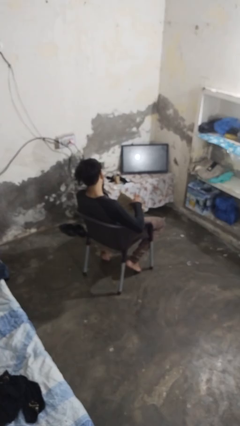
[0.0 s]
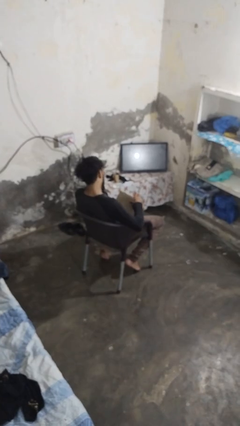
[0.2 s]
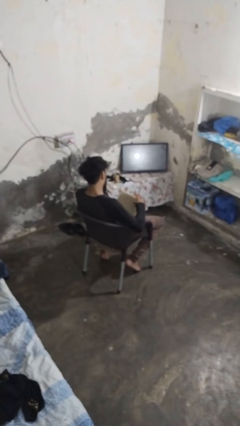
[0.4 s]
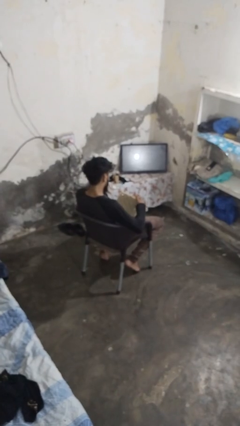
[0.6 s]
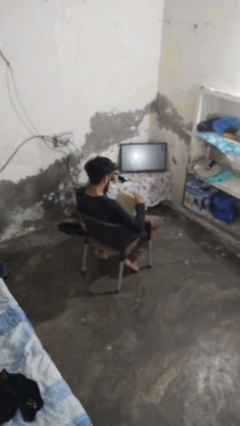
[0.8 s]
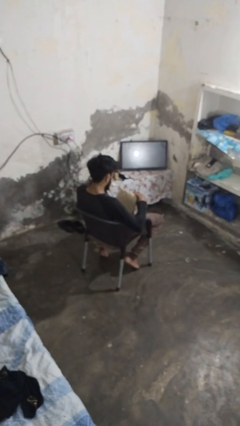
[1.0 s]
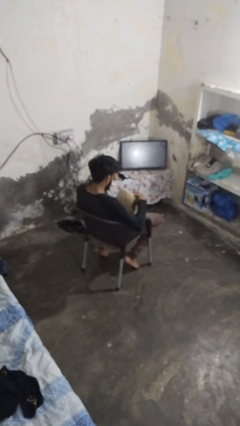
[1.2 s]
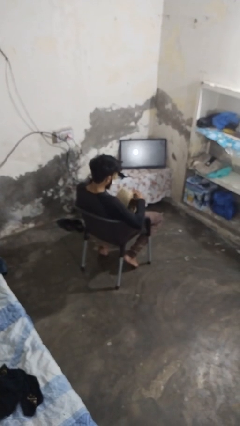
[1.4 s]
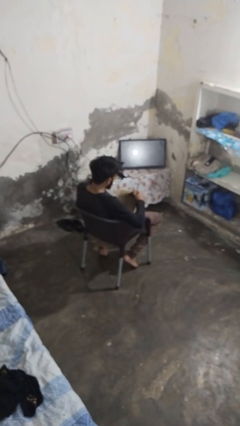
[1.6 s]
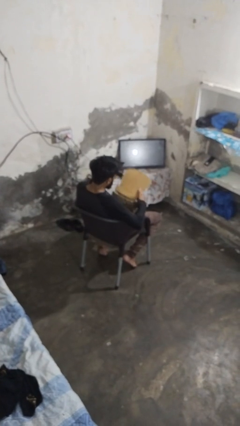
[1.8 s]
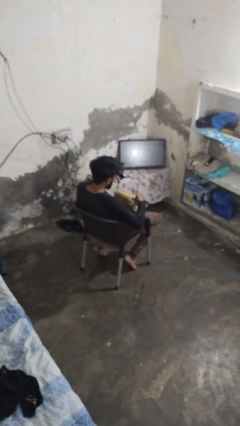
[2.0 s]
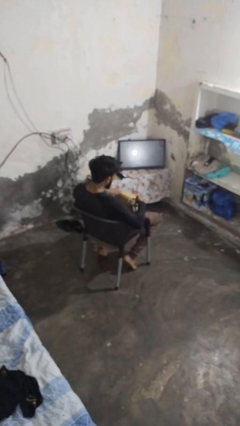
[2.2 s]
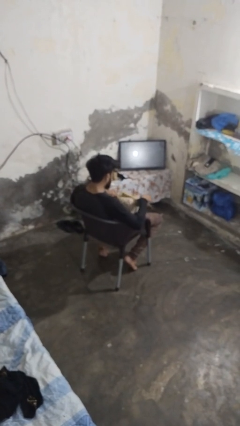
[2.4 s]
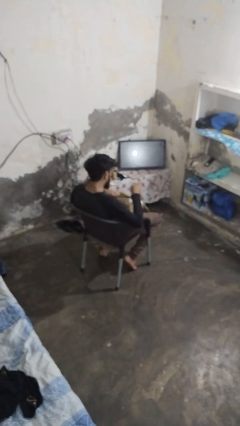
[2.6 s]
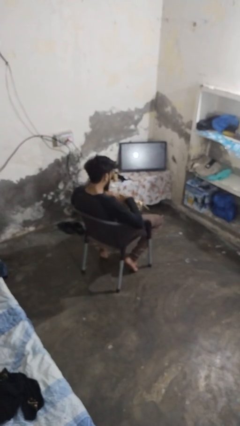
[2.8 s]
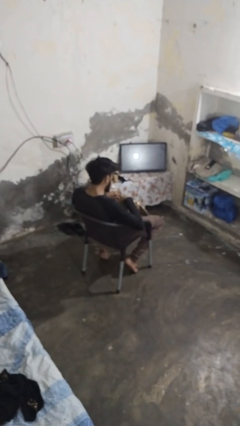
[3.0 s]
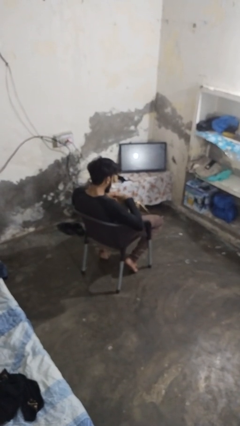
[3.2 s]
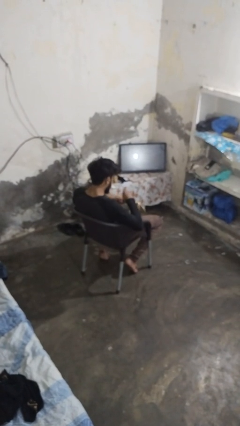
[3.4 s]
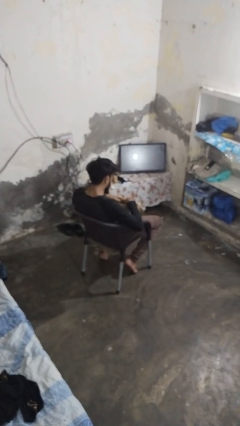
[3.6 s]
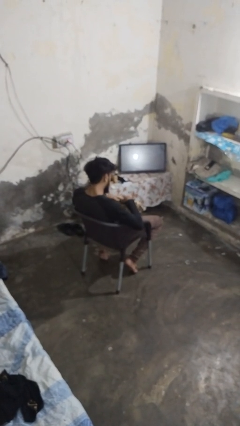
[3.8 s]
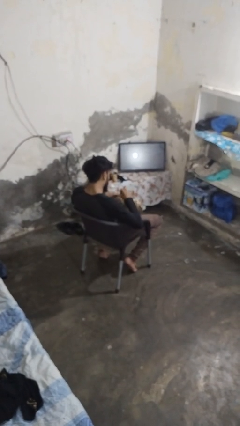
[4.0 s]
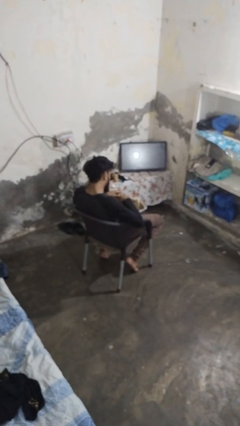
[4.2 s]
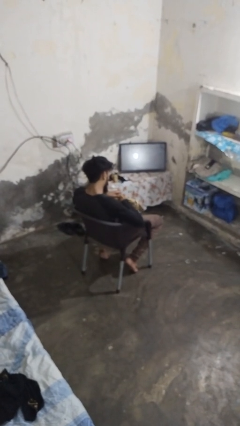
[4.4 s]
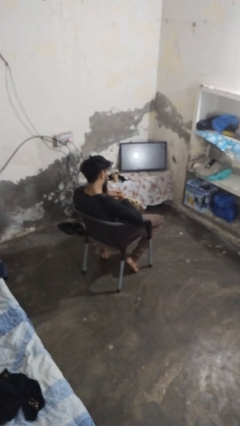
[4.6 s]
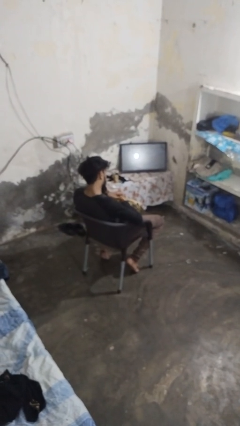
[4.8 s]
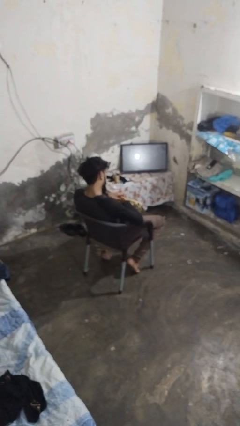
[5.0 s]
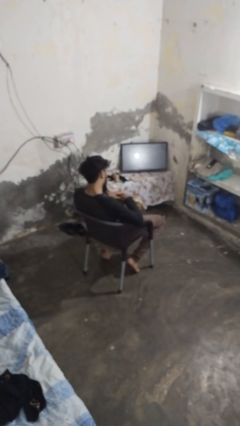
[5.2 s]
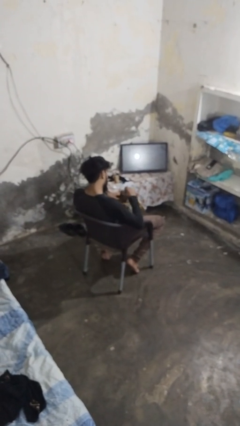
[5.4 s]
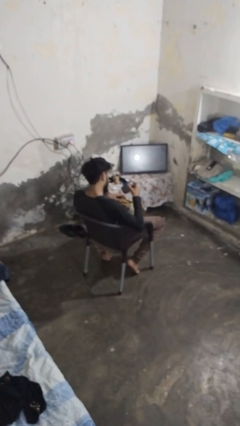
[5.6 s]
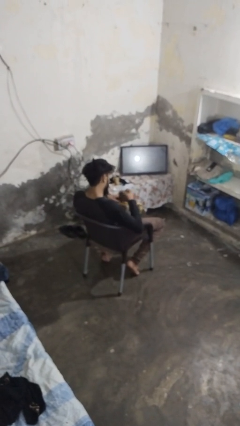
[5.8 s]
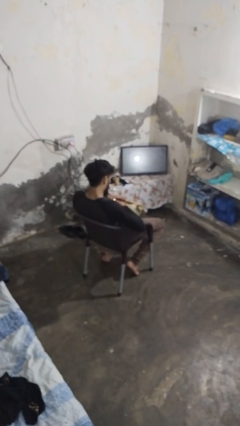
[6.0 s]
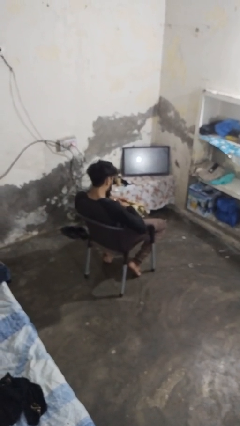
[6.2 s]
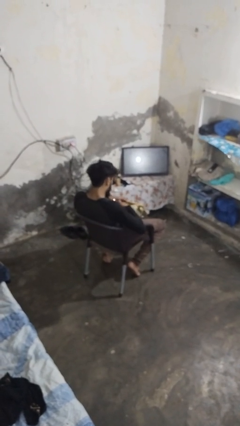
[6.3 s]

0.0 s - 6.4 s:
person searches in purse

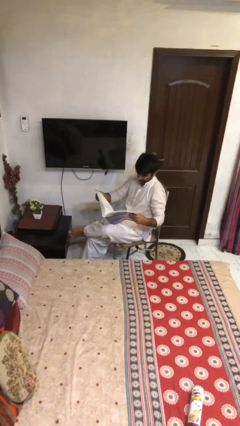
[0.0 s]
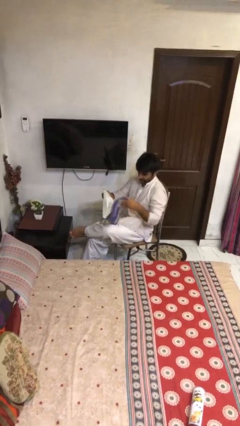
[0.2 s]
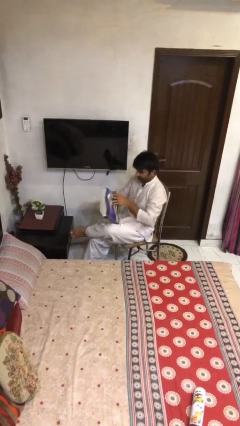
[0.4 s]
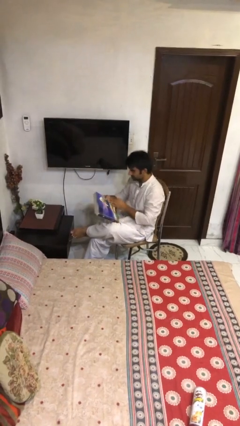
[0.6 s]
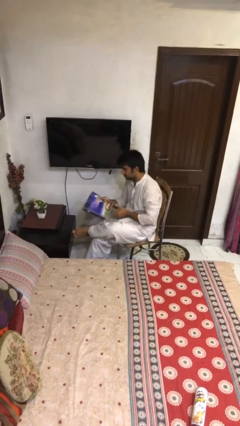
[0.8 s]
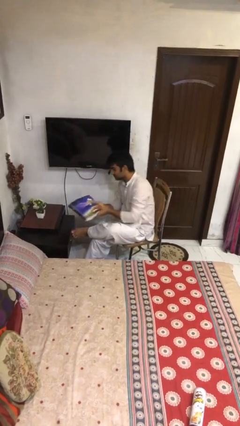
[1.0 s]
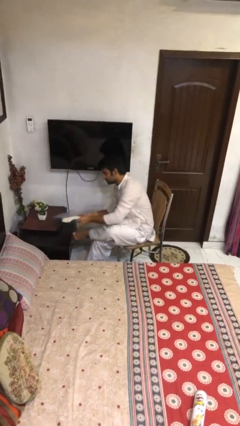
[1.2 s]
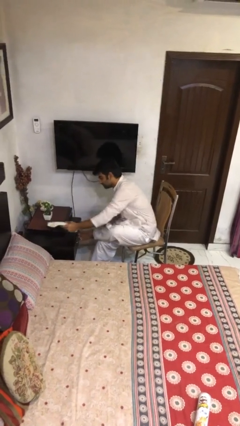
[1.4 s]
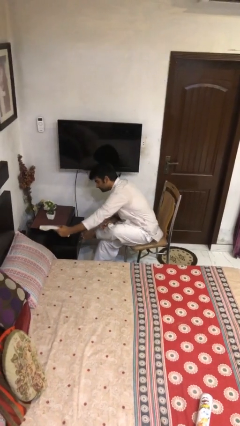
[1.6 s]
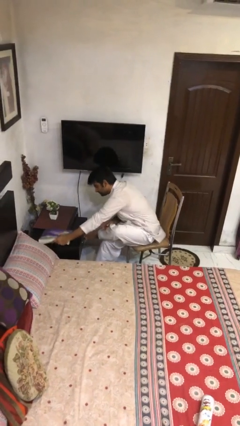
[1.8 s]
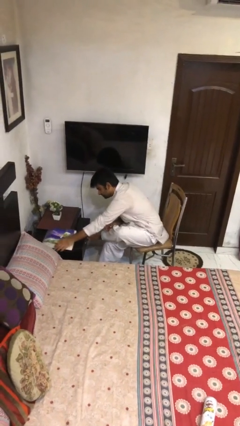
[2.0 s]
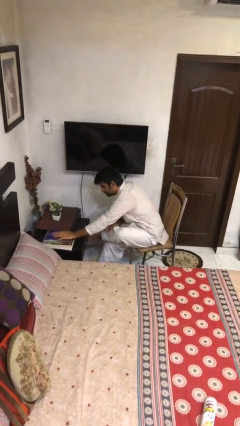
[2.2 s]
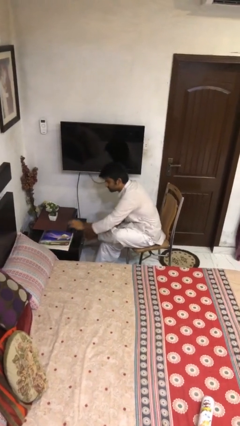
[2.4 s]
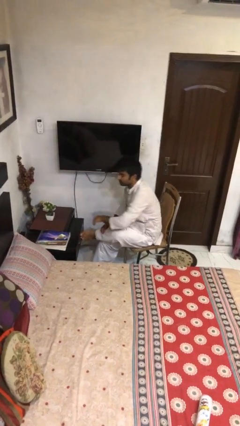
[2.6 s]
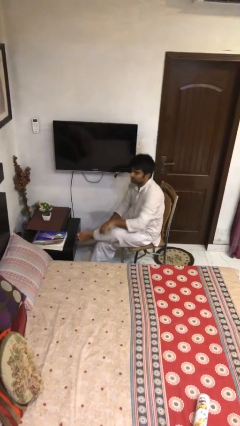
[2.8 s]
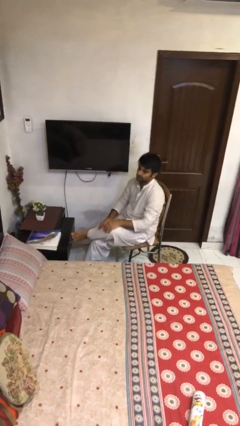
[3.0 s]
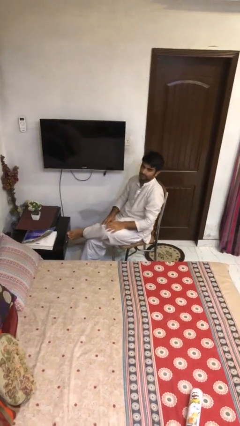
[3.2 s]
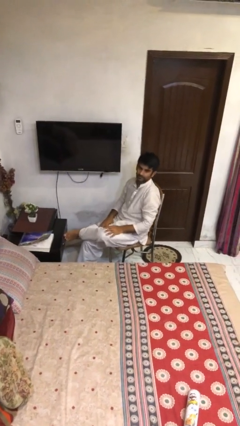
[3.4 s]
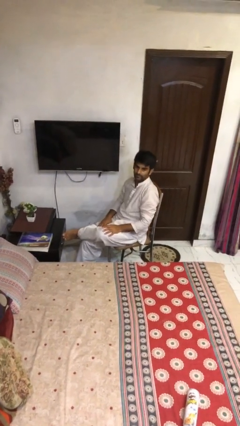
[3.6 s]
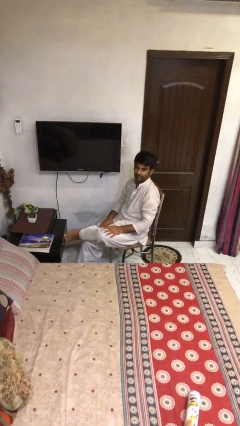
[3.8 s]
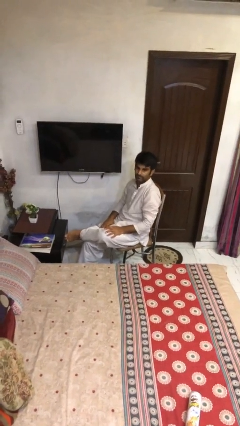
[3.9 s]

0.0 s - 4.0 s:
person puts down object on table

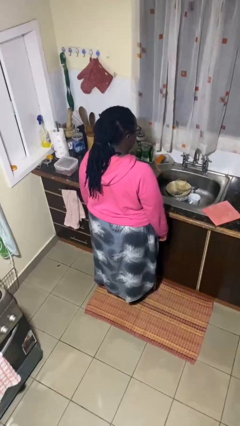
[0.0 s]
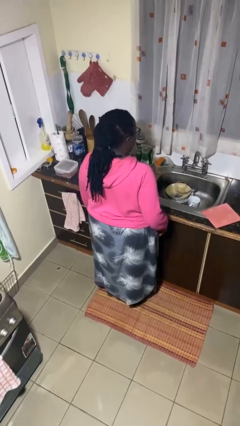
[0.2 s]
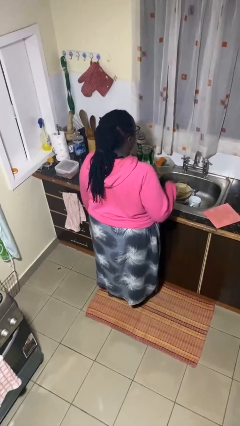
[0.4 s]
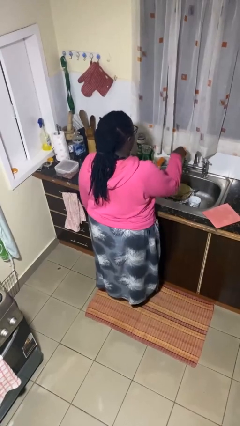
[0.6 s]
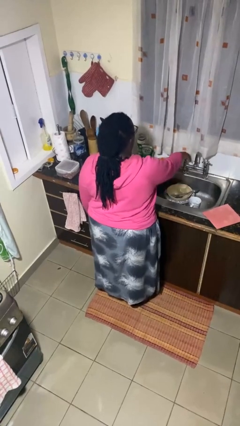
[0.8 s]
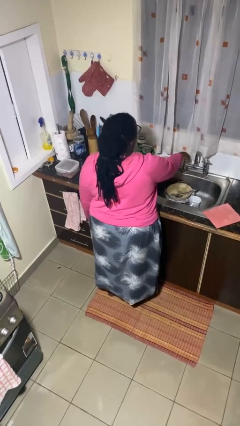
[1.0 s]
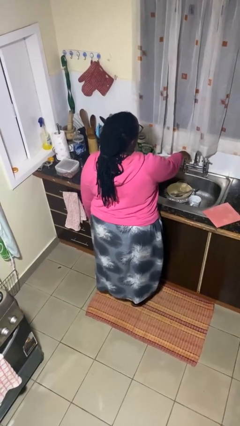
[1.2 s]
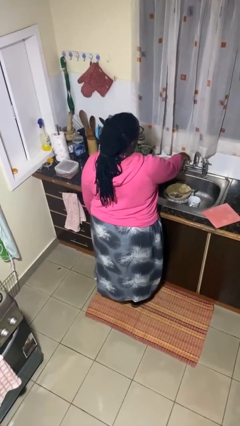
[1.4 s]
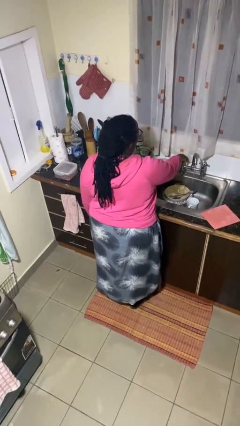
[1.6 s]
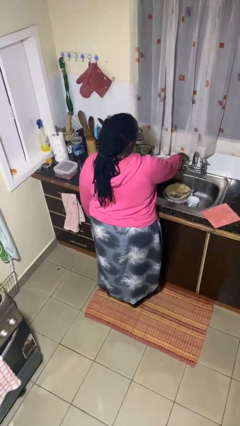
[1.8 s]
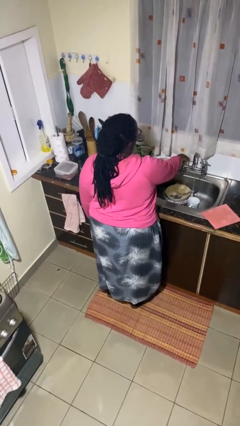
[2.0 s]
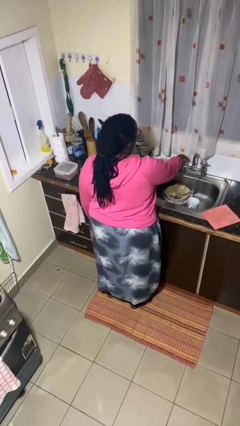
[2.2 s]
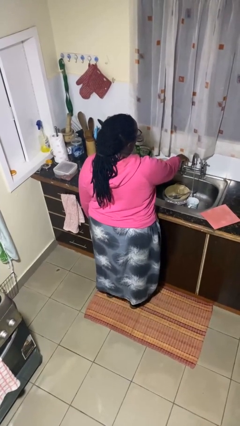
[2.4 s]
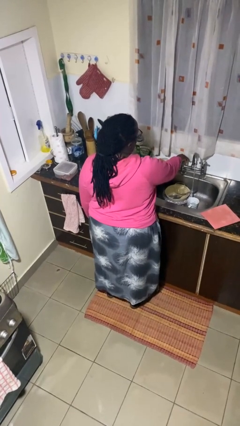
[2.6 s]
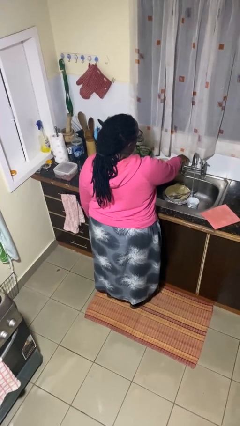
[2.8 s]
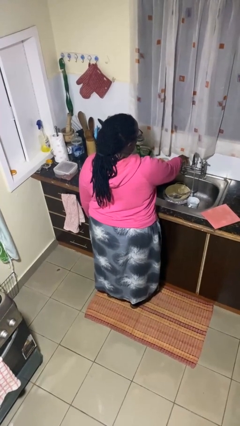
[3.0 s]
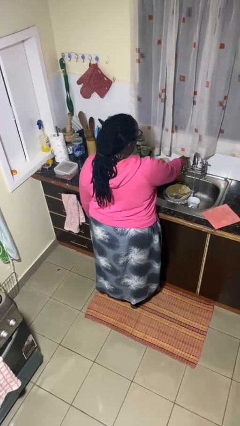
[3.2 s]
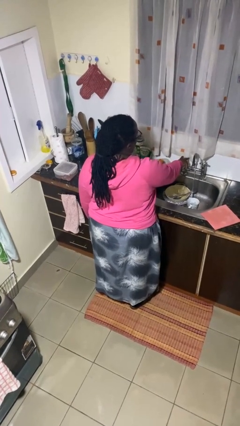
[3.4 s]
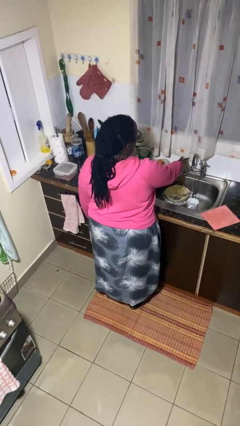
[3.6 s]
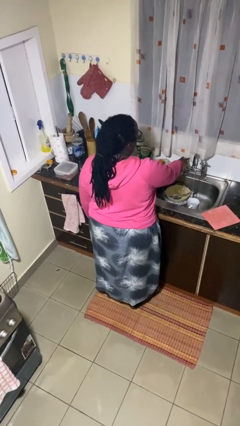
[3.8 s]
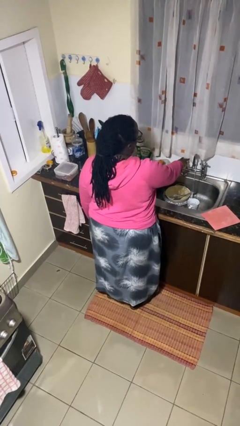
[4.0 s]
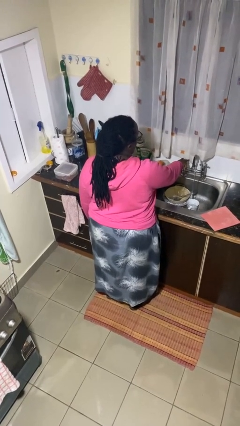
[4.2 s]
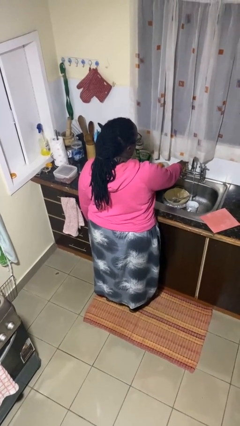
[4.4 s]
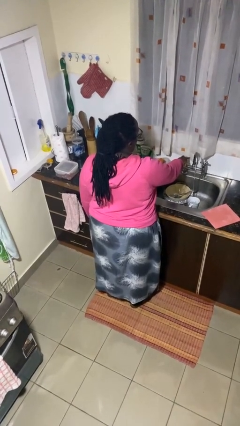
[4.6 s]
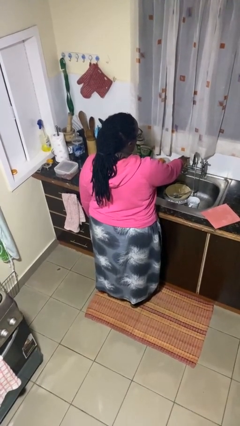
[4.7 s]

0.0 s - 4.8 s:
person turns on faucet

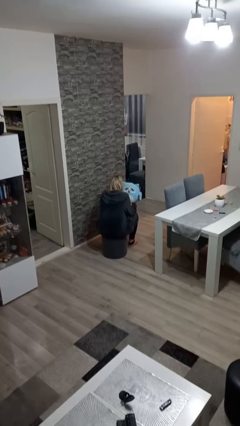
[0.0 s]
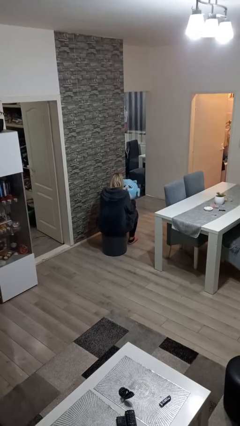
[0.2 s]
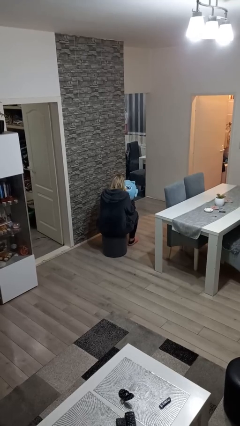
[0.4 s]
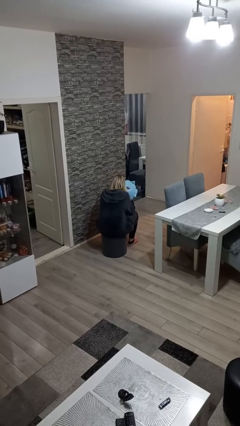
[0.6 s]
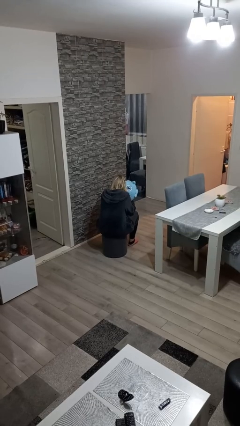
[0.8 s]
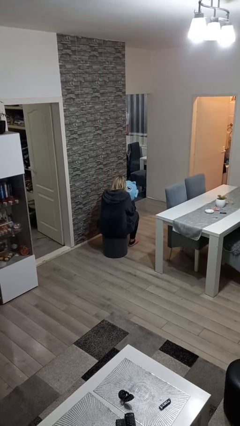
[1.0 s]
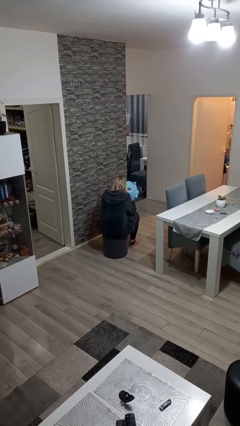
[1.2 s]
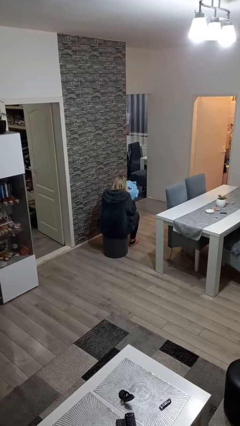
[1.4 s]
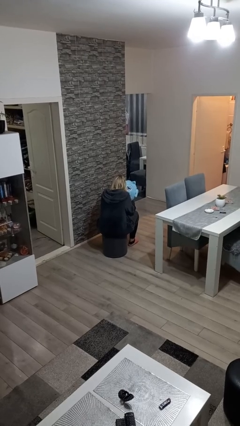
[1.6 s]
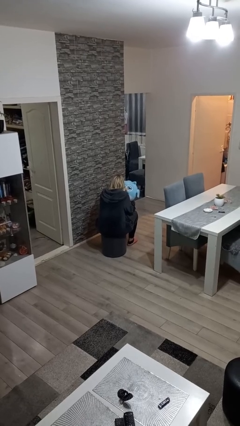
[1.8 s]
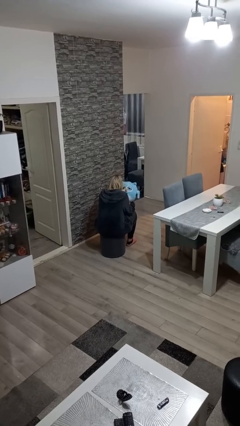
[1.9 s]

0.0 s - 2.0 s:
person hugs stuffed animal

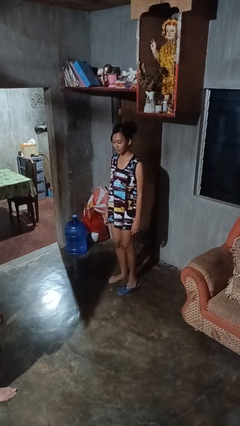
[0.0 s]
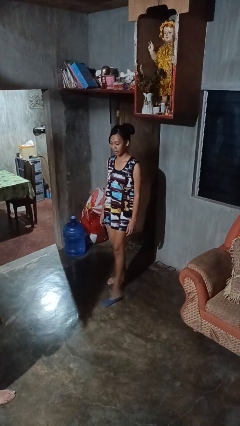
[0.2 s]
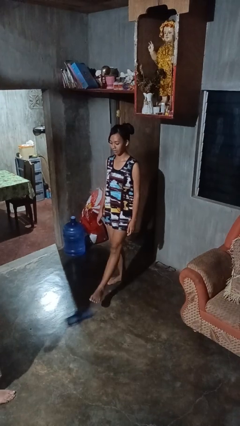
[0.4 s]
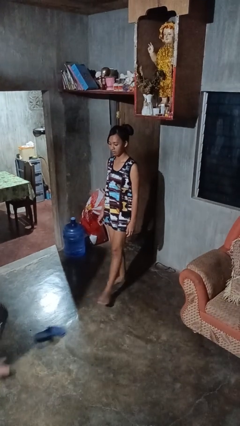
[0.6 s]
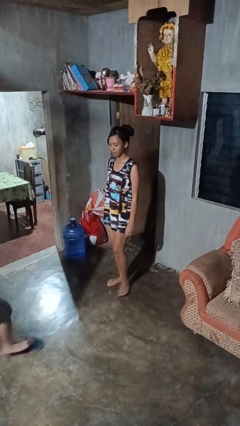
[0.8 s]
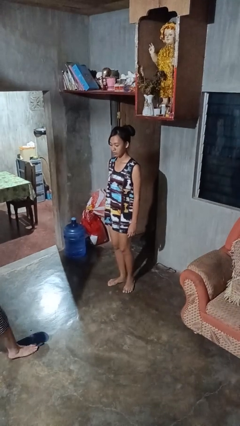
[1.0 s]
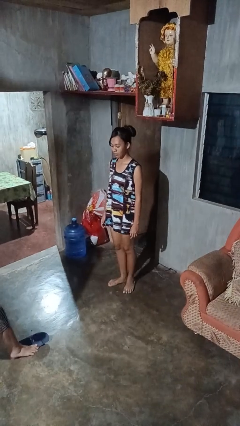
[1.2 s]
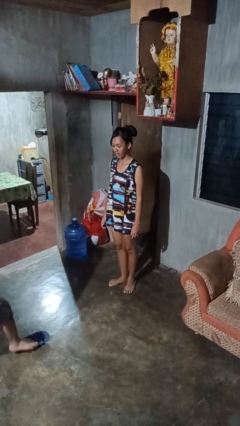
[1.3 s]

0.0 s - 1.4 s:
person kicks object to person
